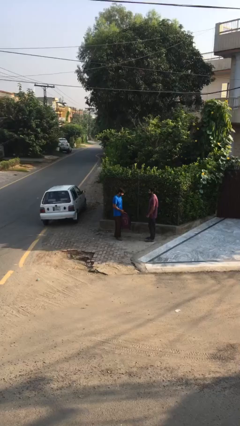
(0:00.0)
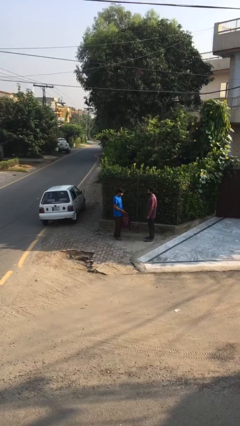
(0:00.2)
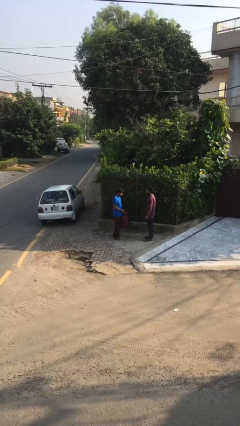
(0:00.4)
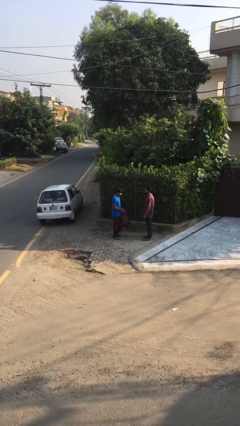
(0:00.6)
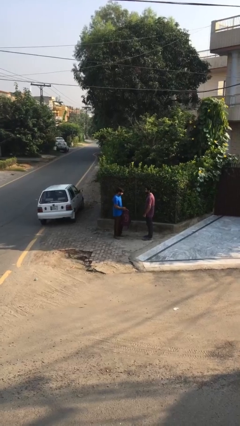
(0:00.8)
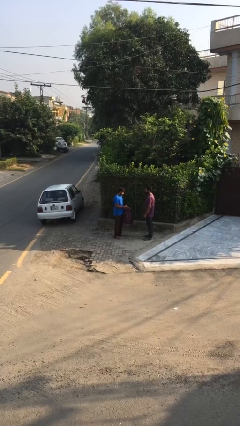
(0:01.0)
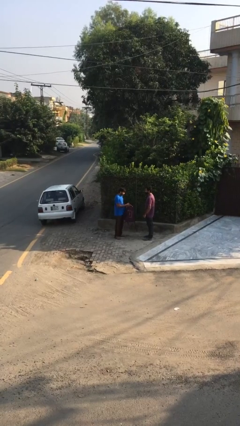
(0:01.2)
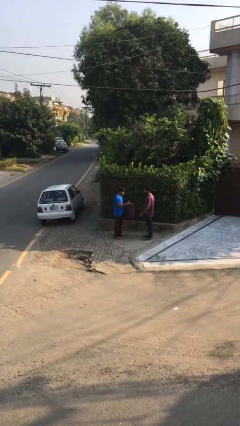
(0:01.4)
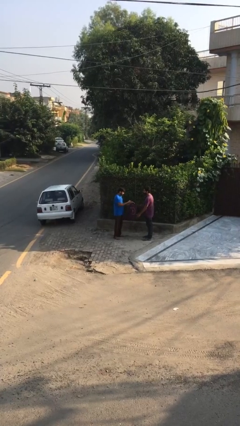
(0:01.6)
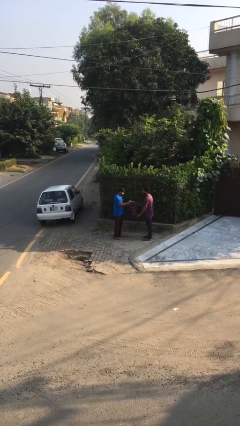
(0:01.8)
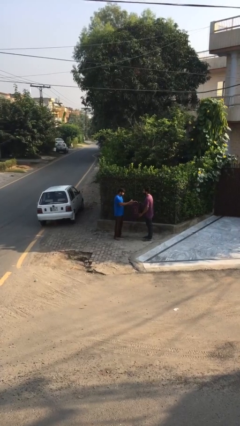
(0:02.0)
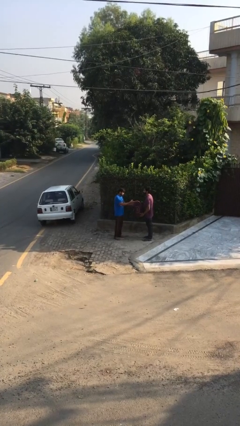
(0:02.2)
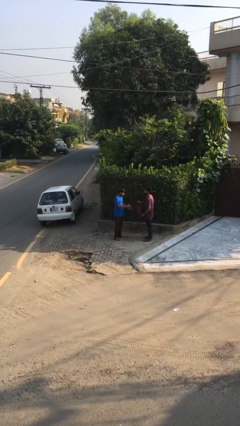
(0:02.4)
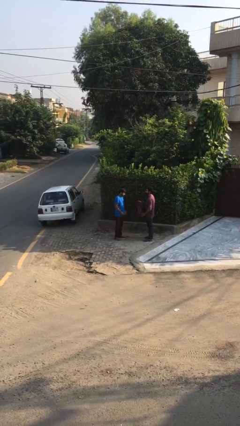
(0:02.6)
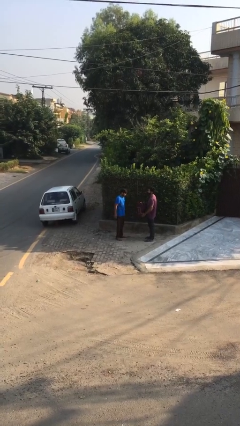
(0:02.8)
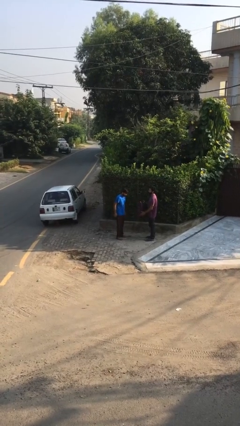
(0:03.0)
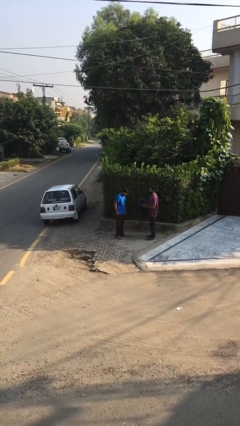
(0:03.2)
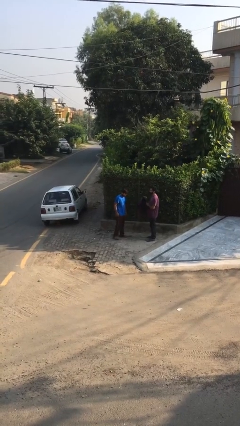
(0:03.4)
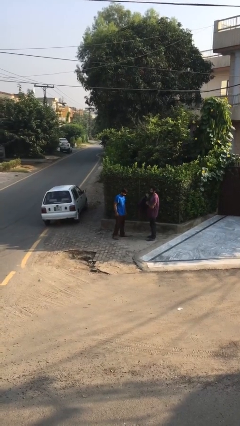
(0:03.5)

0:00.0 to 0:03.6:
person transfers object to person

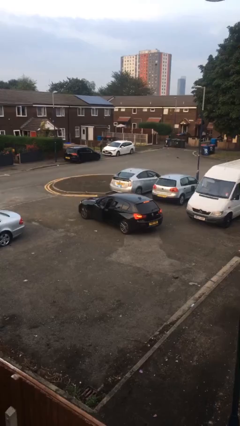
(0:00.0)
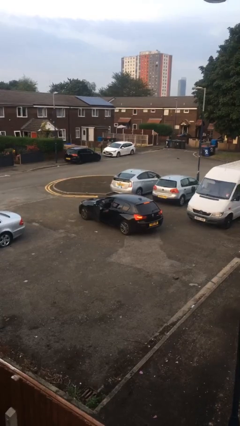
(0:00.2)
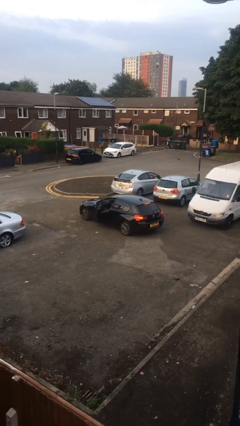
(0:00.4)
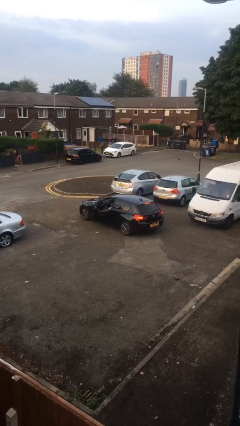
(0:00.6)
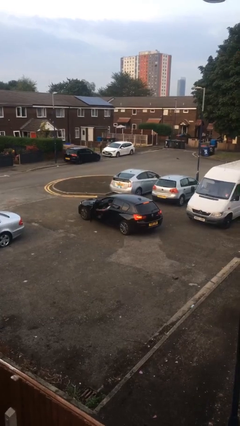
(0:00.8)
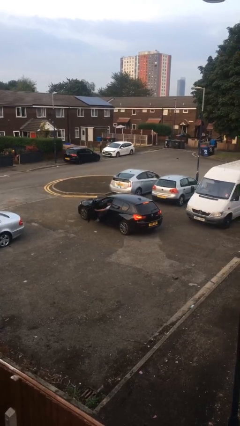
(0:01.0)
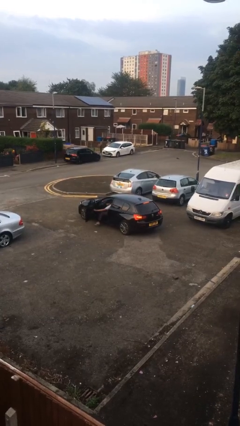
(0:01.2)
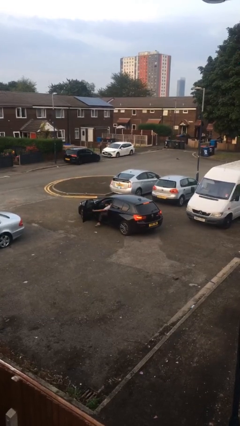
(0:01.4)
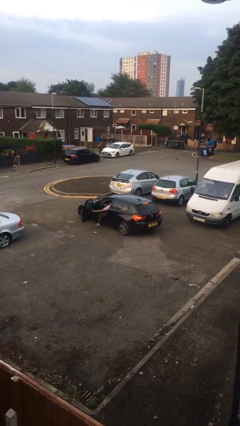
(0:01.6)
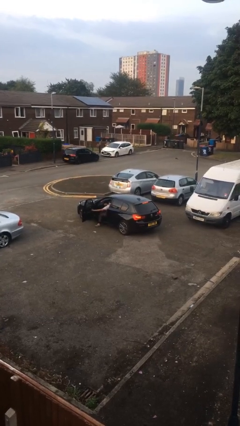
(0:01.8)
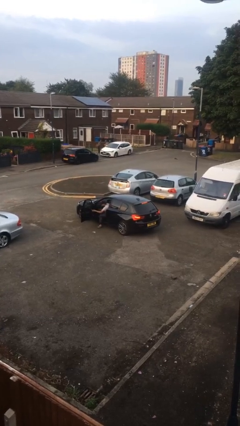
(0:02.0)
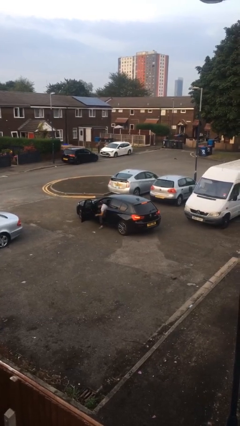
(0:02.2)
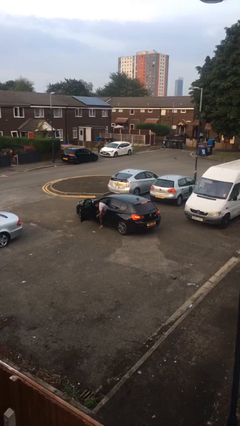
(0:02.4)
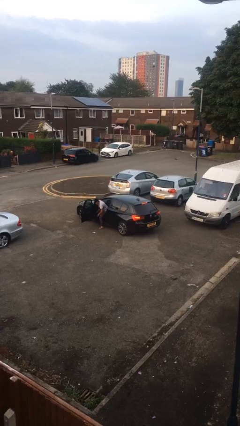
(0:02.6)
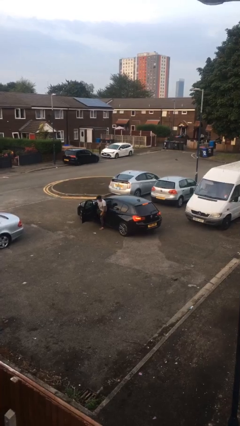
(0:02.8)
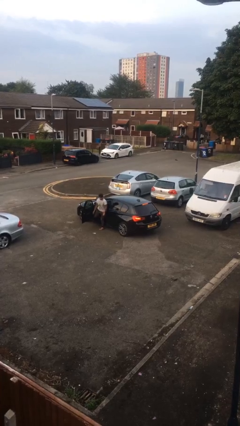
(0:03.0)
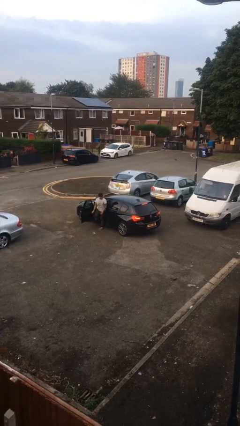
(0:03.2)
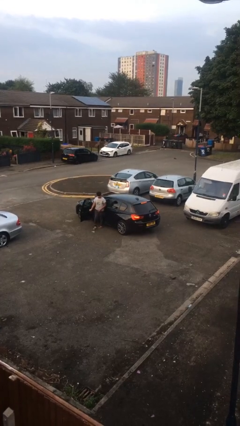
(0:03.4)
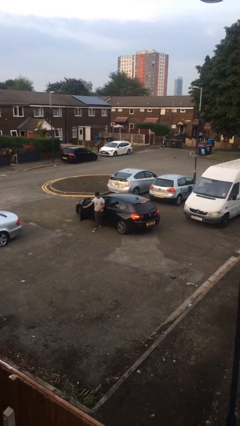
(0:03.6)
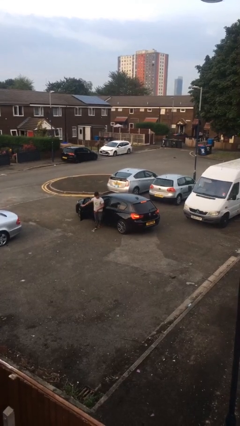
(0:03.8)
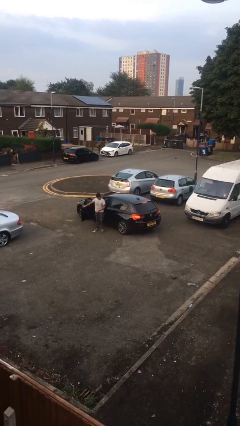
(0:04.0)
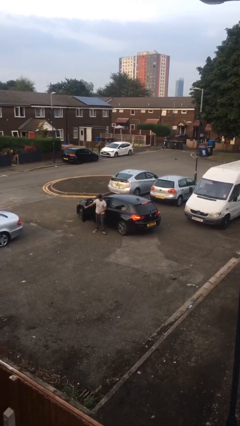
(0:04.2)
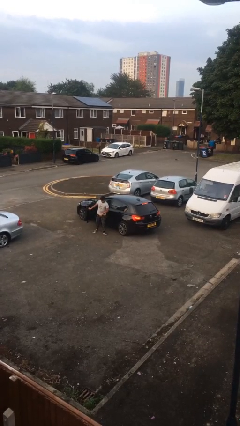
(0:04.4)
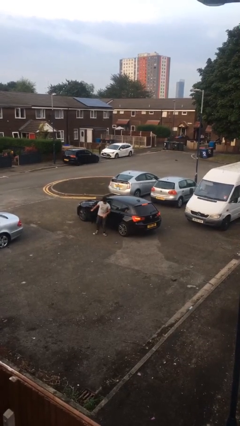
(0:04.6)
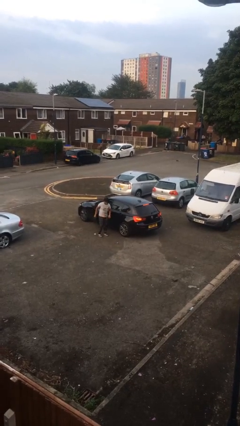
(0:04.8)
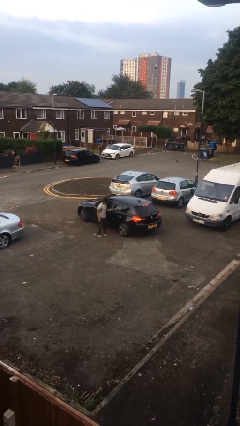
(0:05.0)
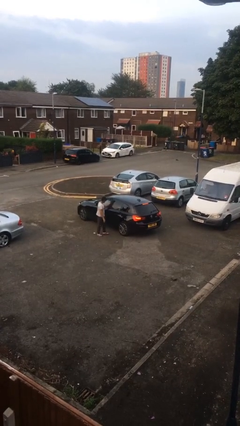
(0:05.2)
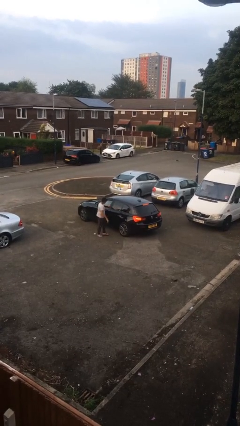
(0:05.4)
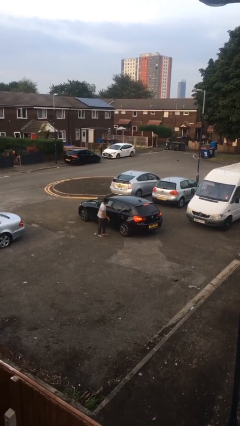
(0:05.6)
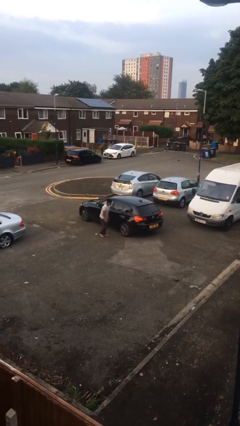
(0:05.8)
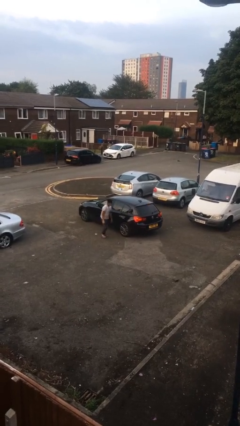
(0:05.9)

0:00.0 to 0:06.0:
car drops off person

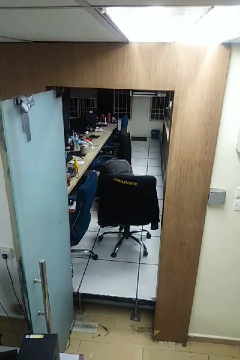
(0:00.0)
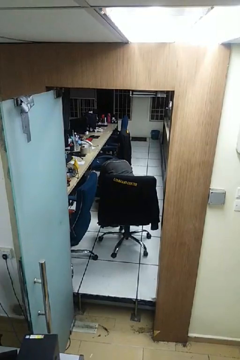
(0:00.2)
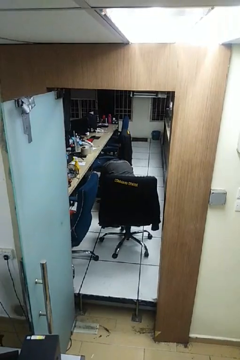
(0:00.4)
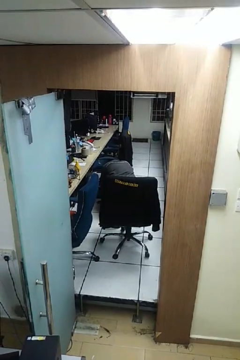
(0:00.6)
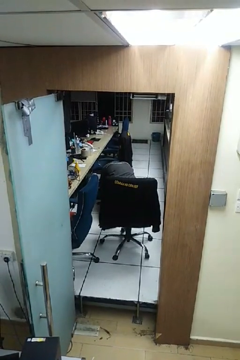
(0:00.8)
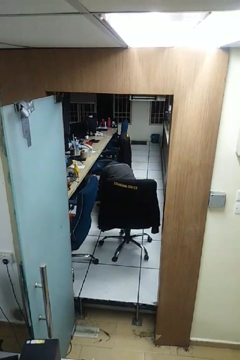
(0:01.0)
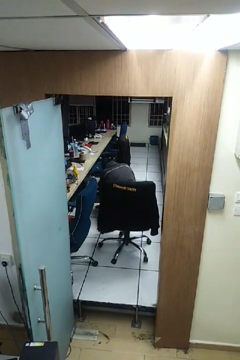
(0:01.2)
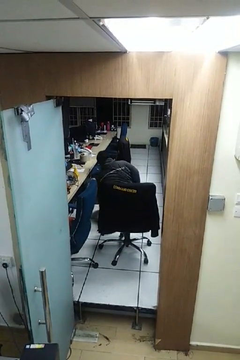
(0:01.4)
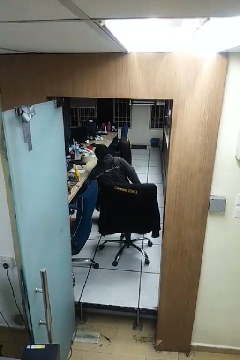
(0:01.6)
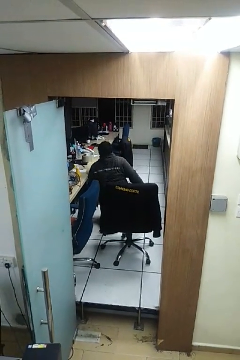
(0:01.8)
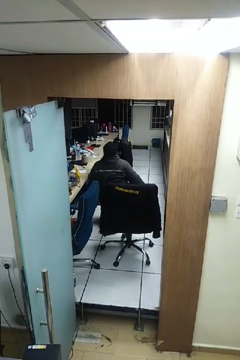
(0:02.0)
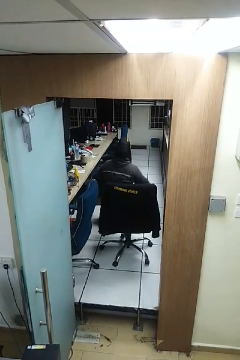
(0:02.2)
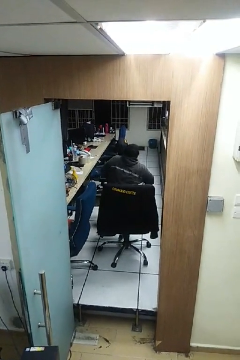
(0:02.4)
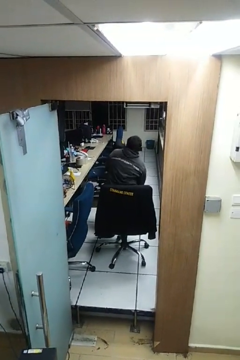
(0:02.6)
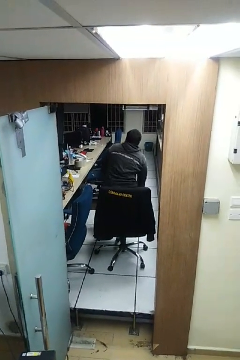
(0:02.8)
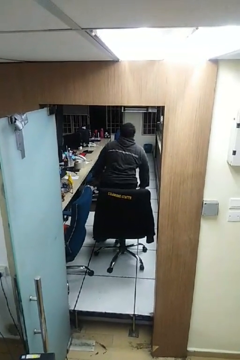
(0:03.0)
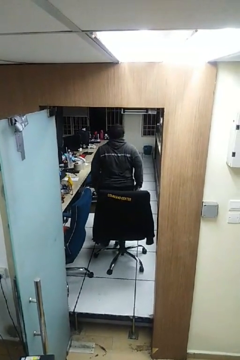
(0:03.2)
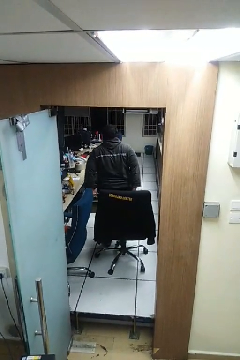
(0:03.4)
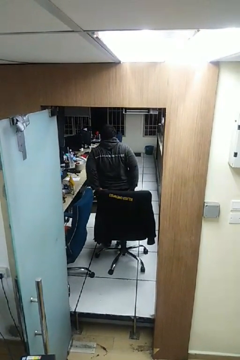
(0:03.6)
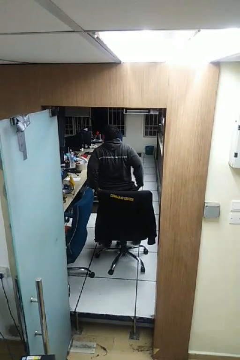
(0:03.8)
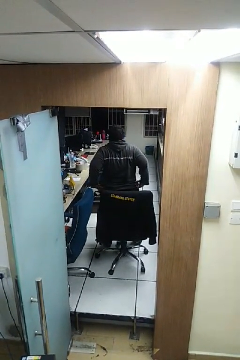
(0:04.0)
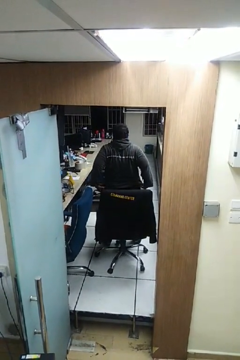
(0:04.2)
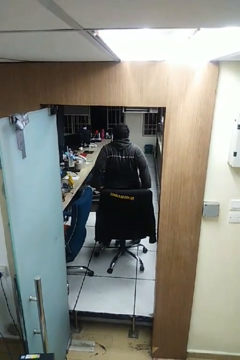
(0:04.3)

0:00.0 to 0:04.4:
person stands up from floor

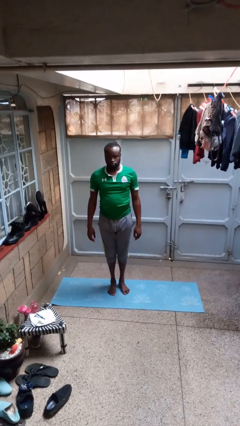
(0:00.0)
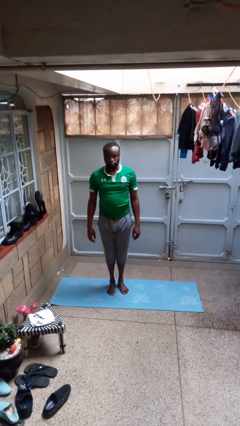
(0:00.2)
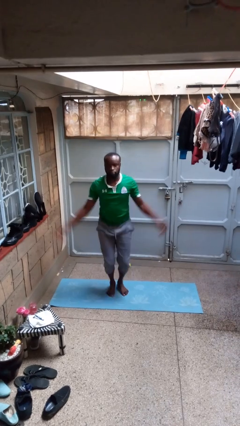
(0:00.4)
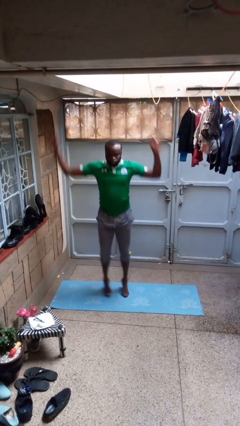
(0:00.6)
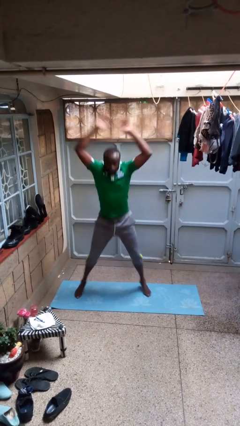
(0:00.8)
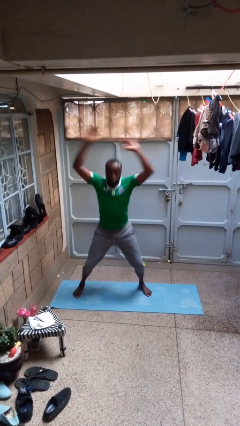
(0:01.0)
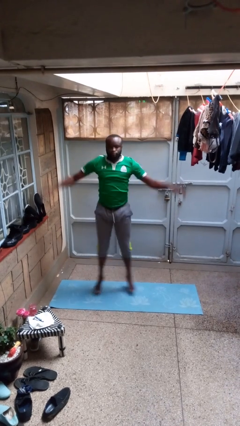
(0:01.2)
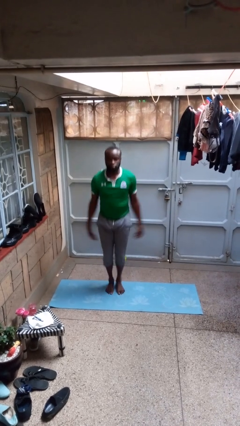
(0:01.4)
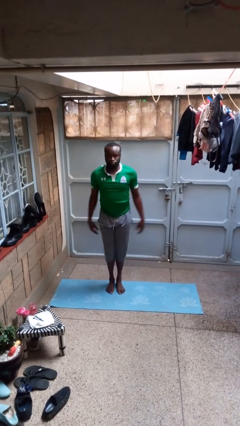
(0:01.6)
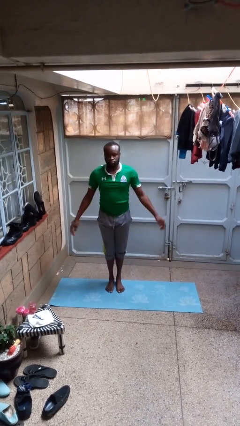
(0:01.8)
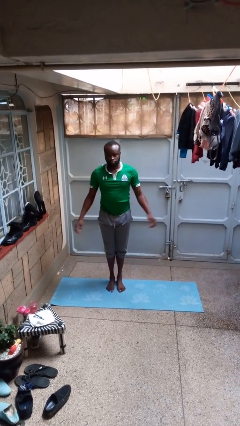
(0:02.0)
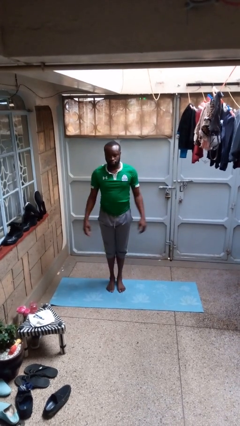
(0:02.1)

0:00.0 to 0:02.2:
person exercises with jumping jacks

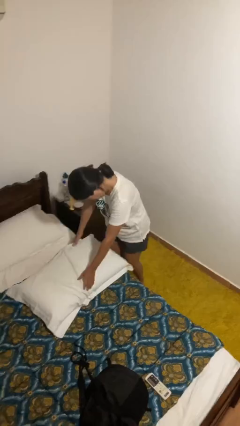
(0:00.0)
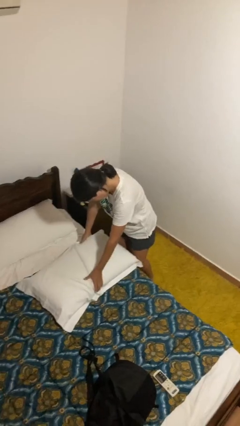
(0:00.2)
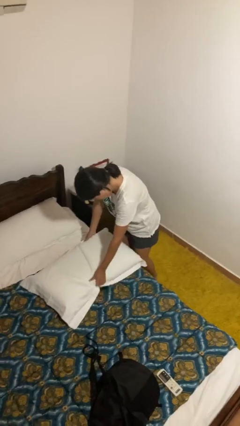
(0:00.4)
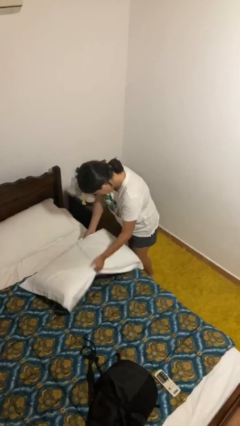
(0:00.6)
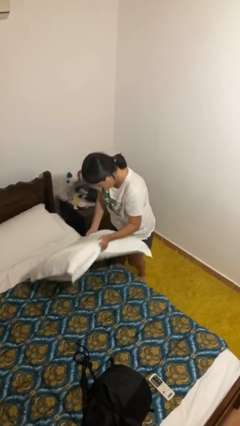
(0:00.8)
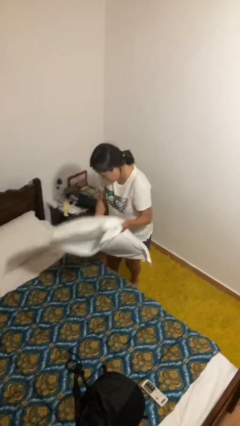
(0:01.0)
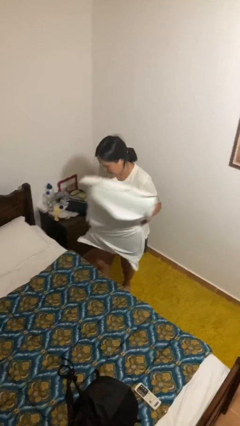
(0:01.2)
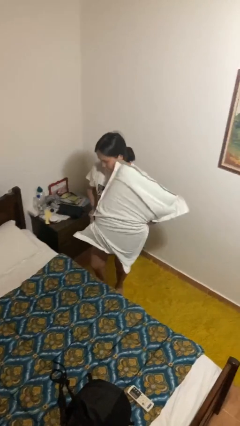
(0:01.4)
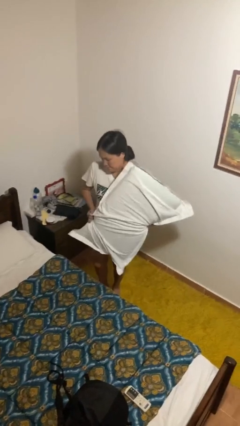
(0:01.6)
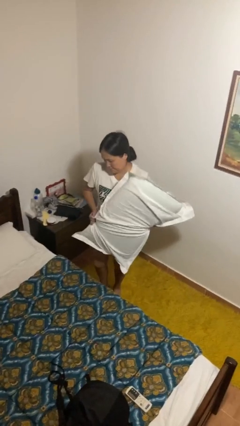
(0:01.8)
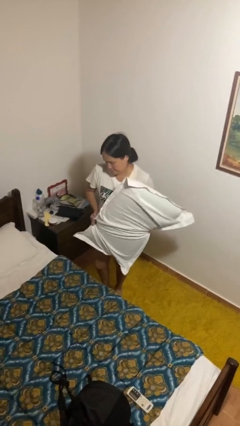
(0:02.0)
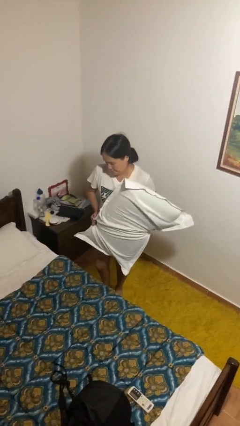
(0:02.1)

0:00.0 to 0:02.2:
person picks up object from bed

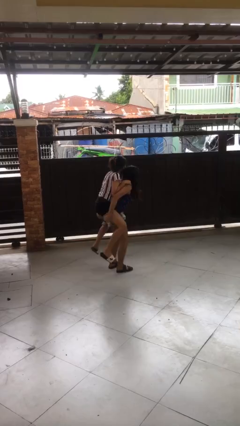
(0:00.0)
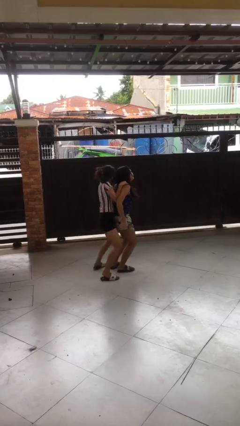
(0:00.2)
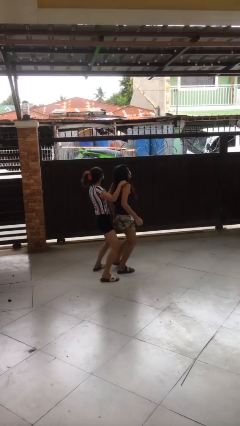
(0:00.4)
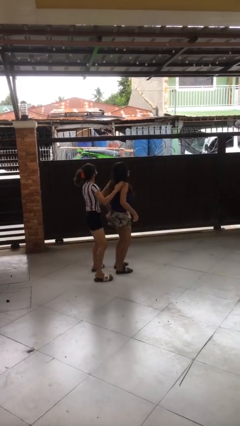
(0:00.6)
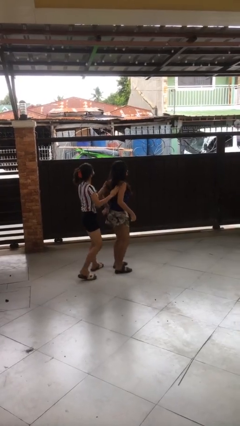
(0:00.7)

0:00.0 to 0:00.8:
person puts down person
